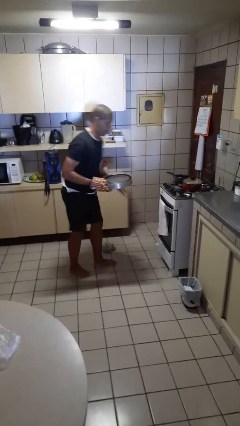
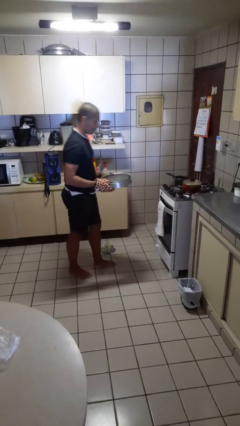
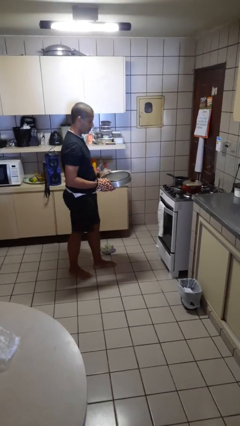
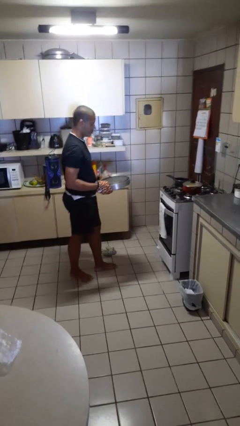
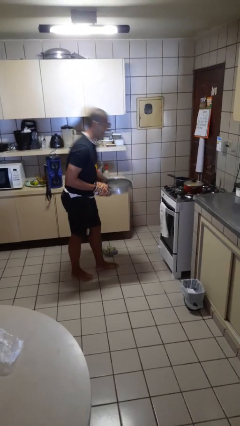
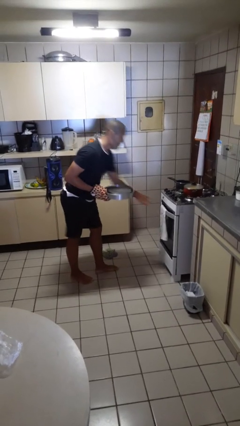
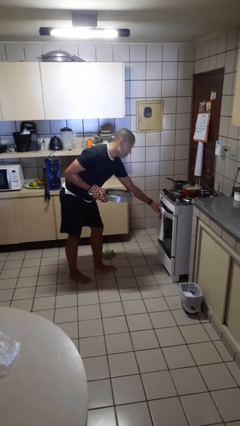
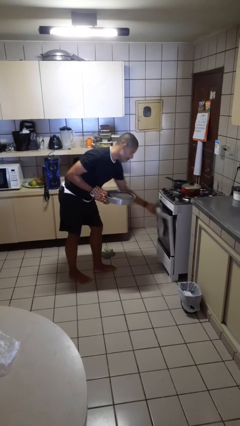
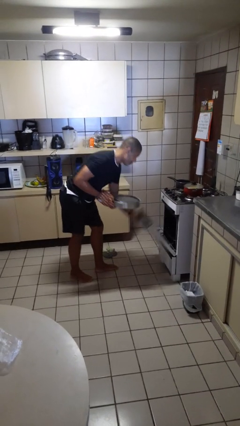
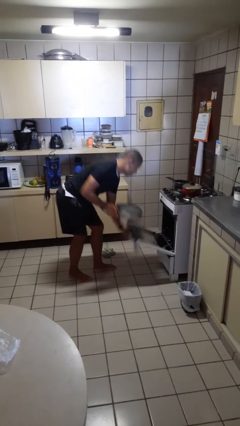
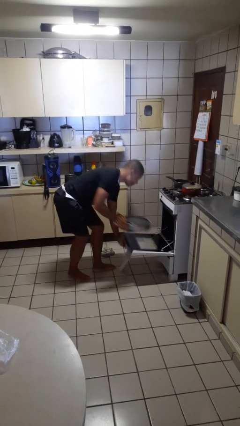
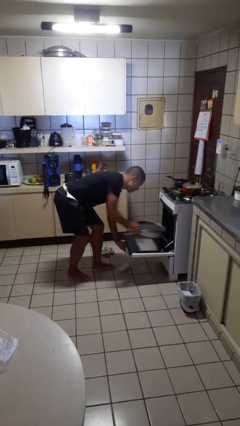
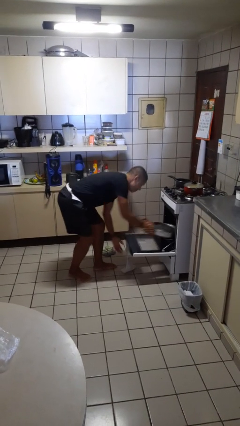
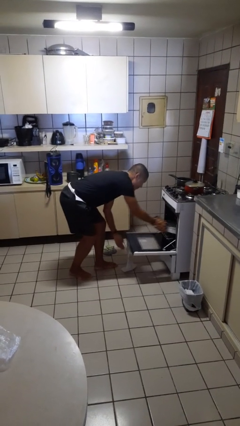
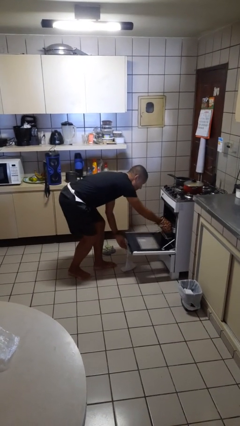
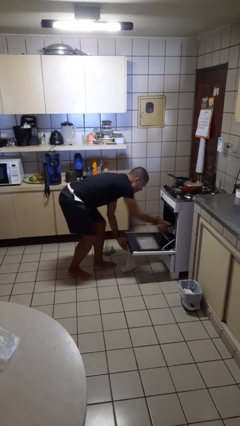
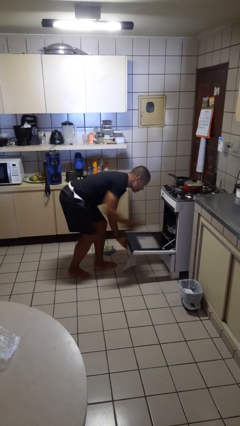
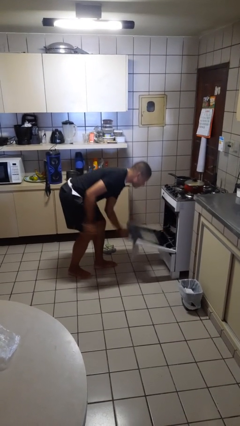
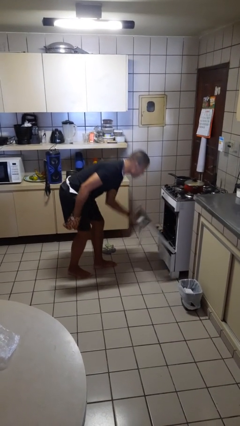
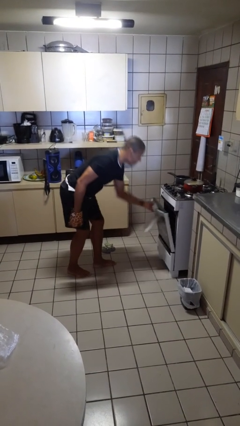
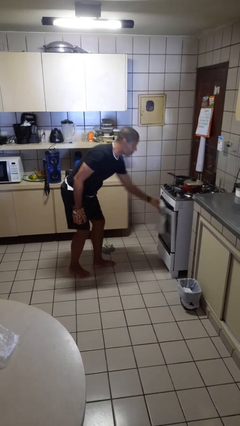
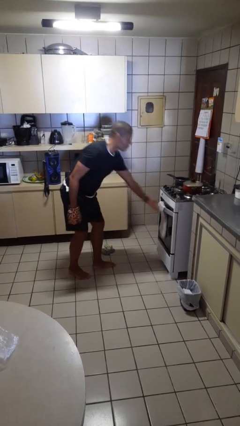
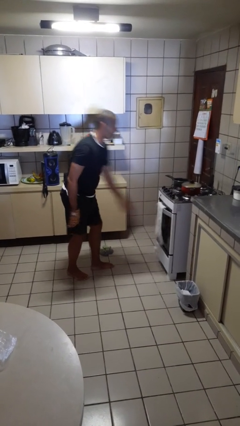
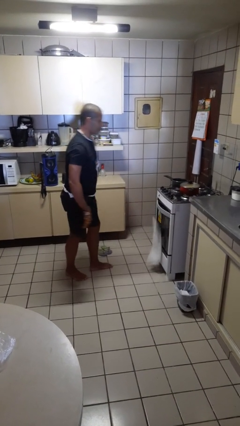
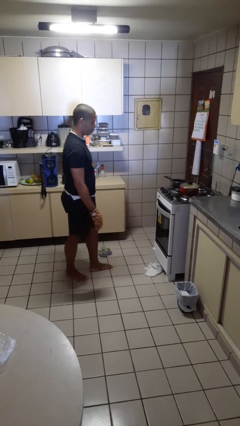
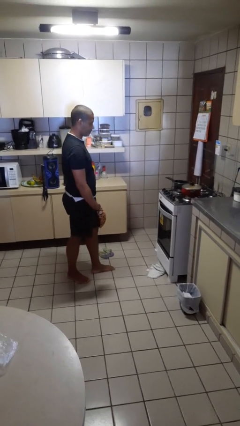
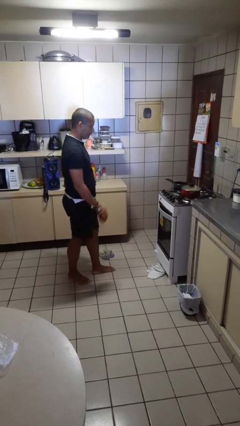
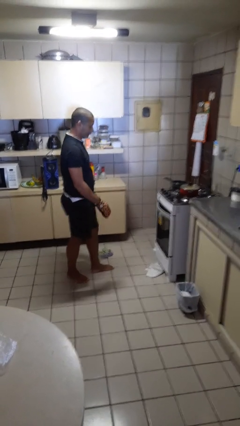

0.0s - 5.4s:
person puts object into oven

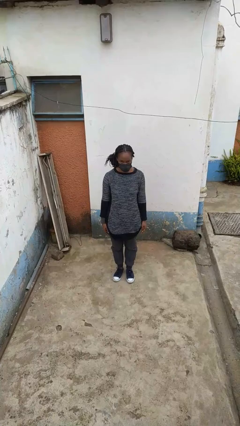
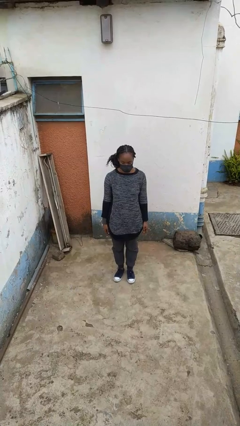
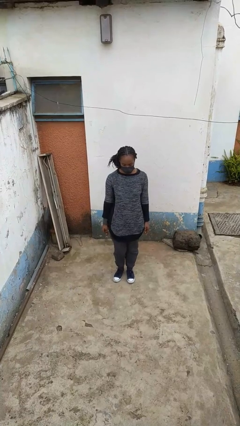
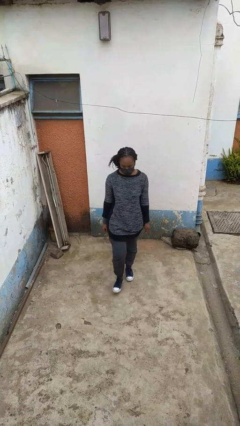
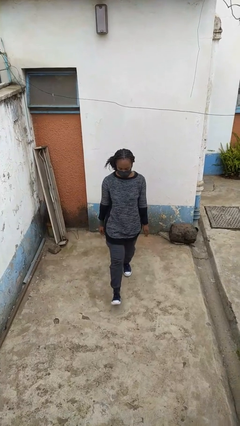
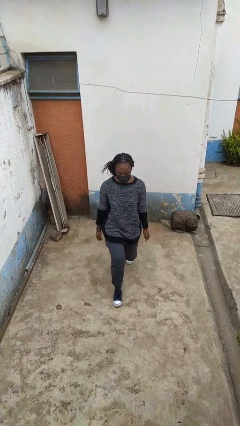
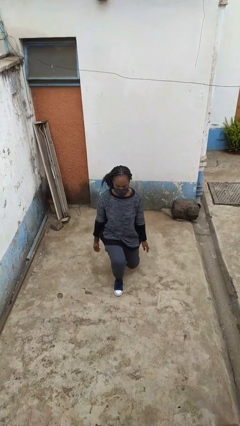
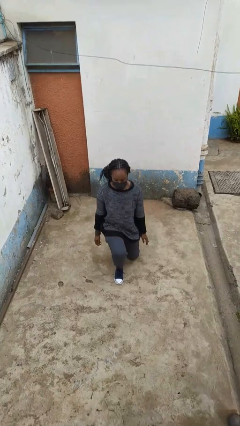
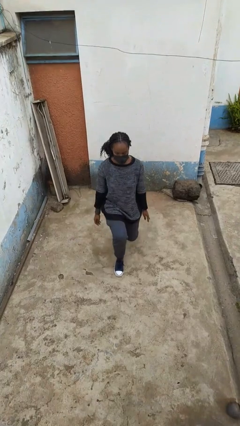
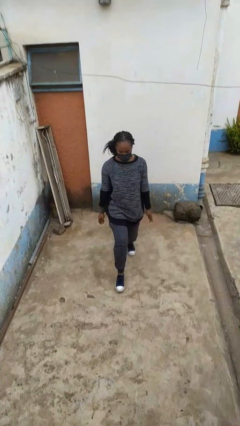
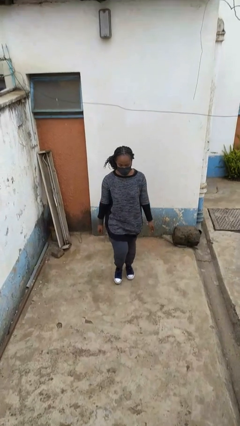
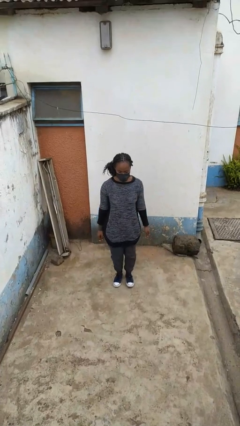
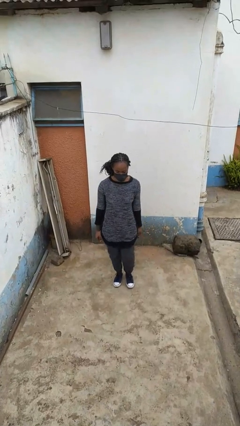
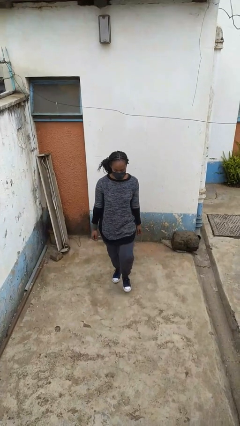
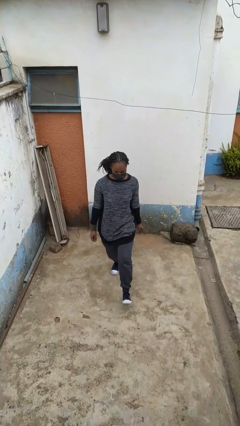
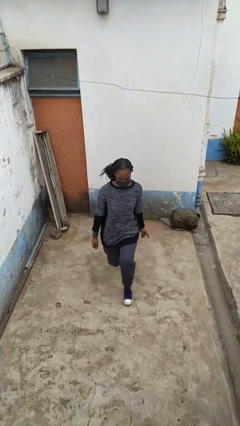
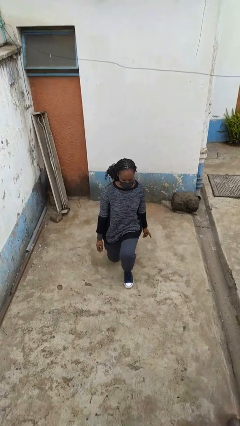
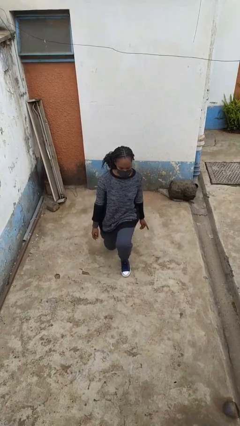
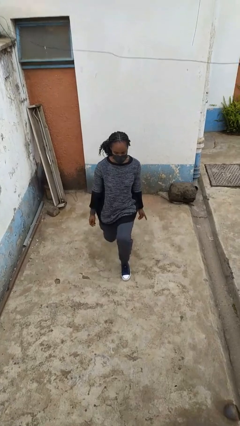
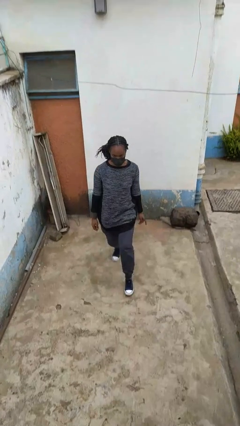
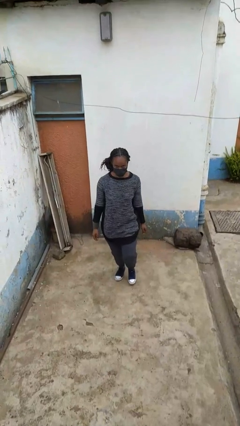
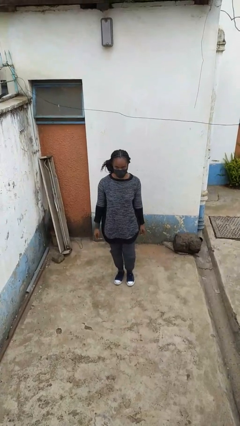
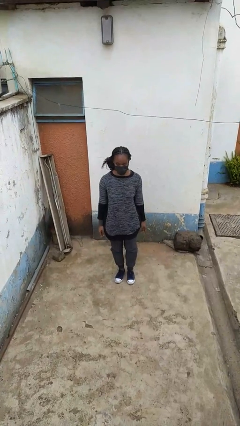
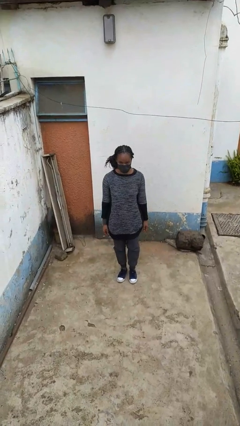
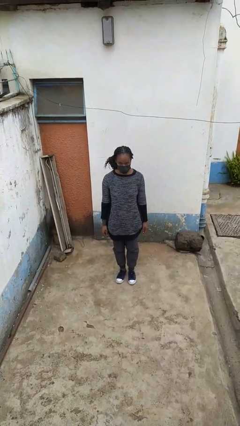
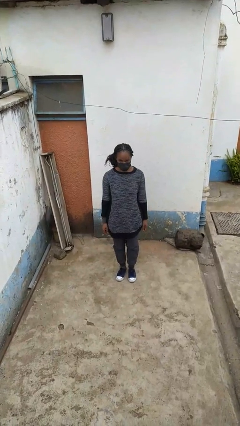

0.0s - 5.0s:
person exercises with lunges

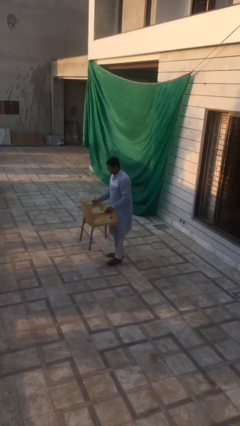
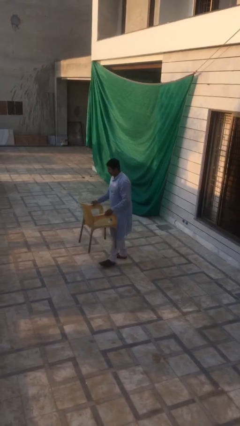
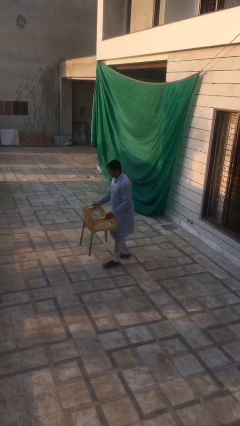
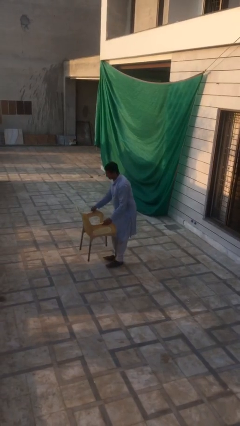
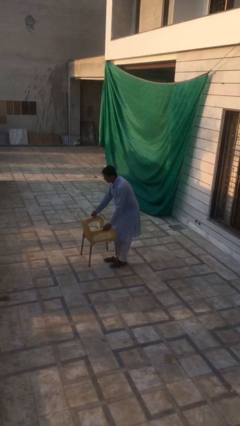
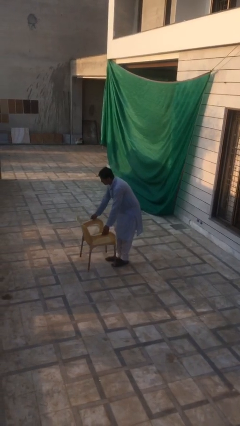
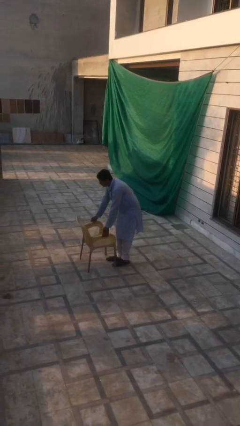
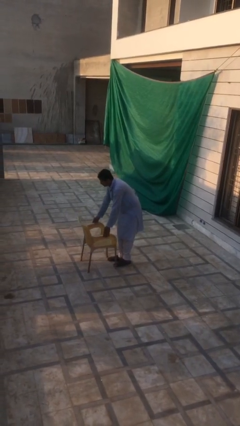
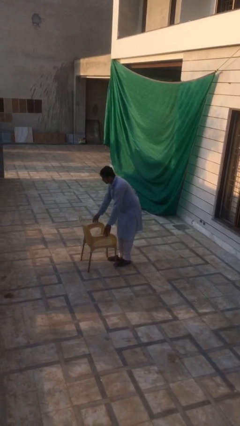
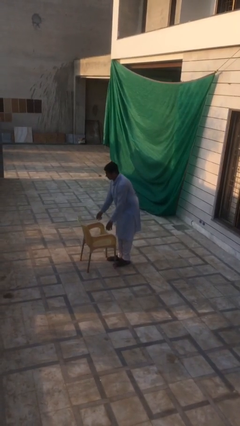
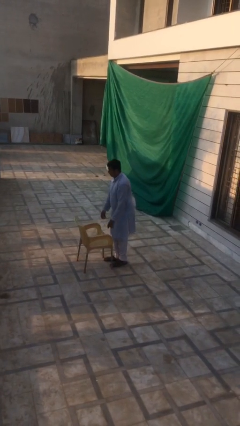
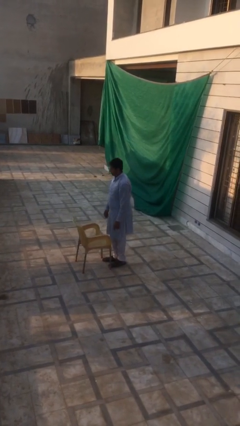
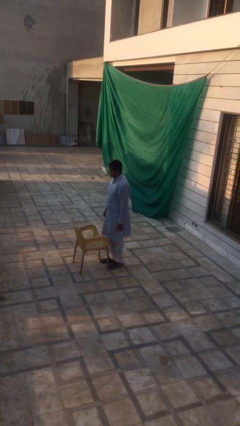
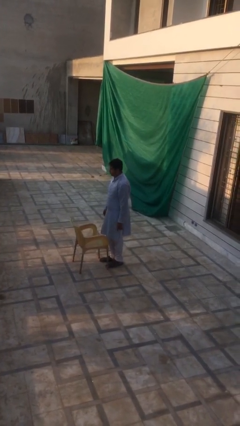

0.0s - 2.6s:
person puts down object on floor

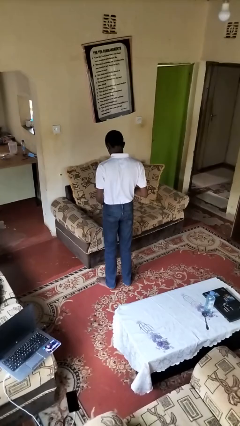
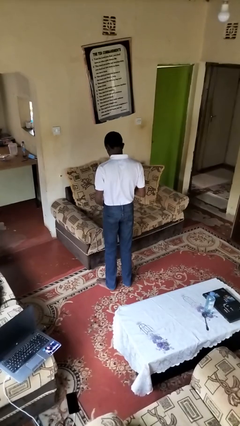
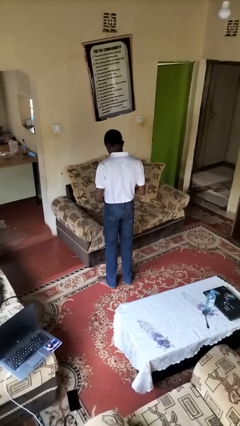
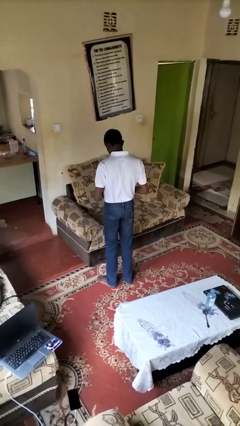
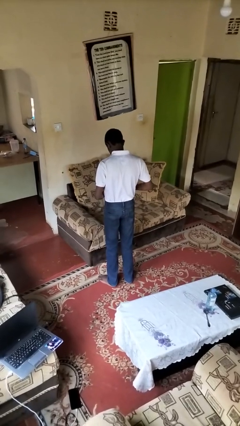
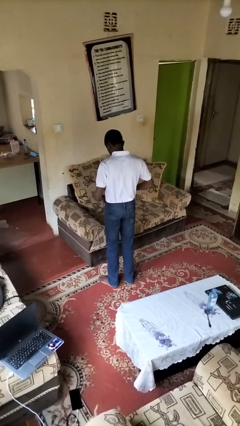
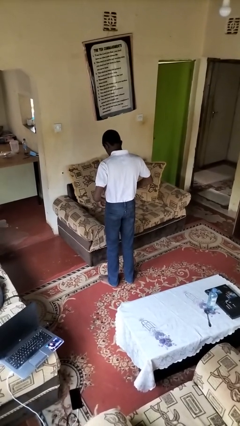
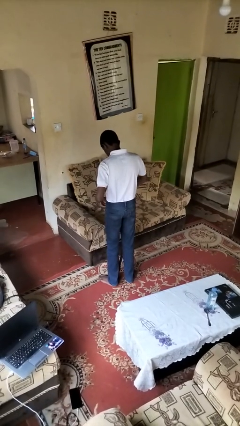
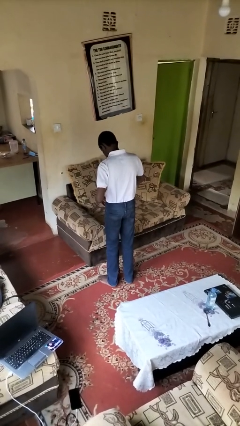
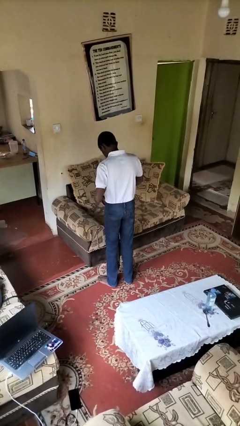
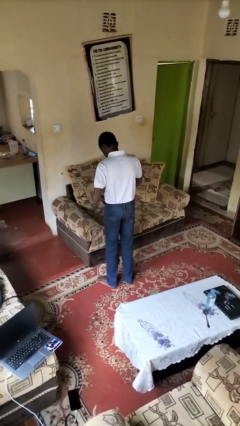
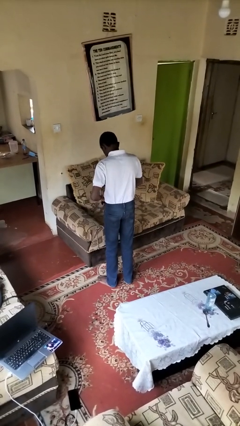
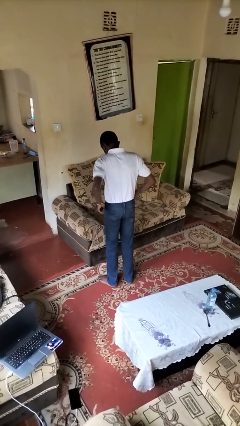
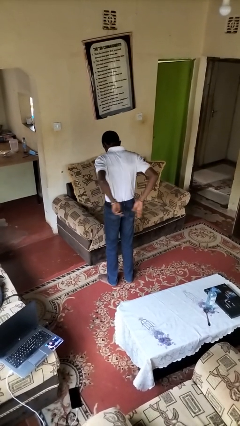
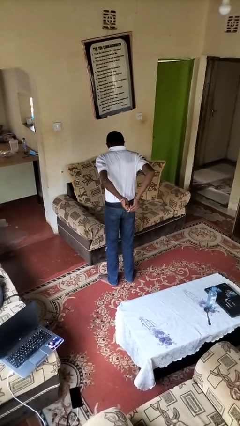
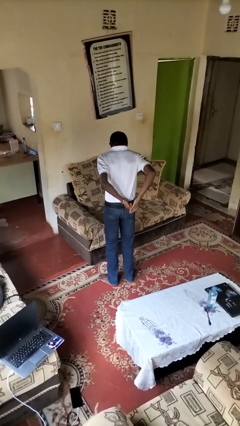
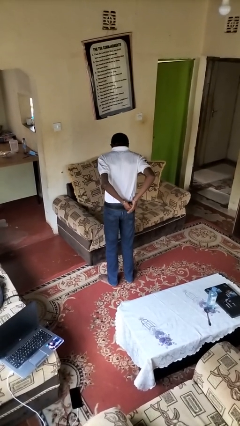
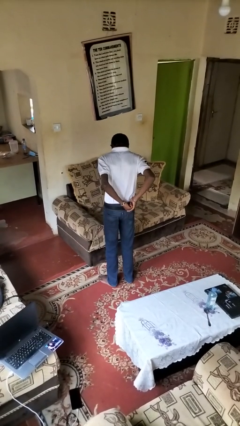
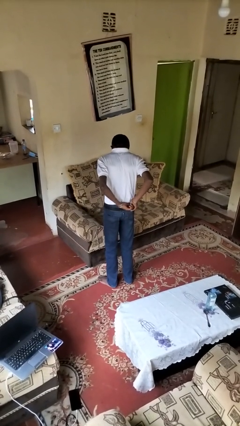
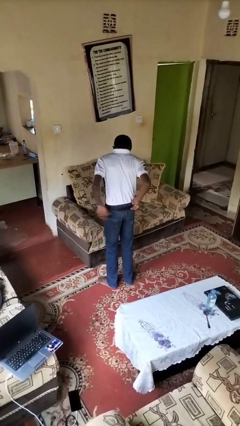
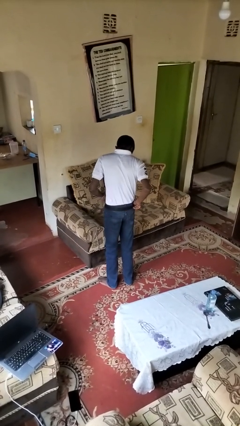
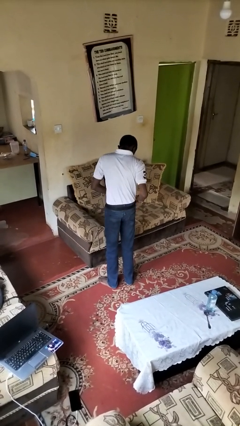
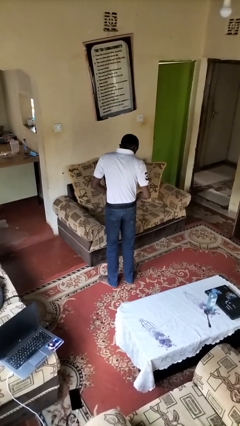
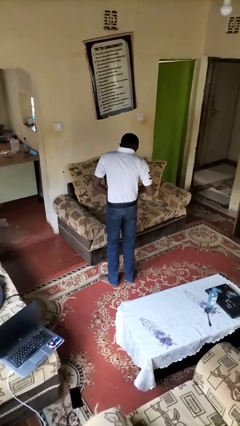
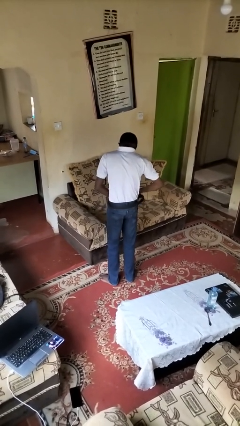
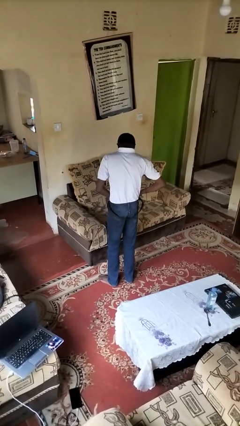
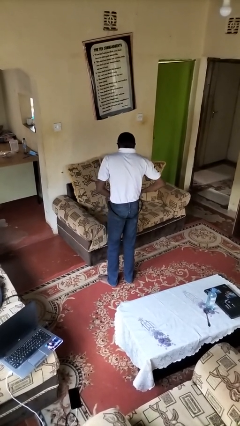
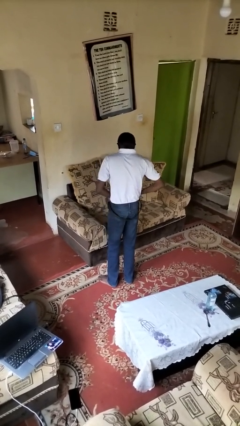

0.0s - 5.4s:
person puts on belt
